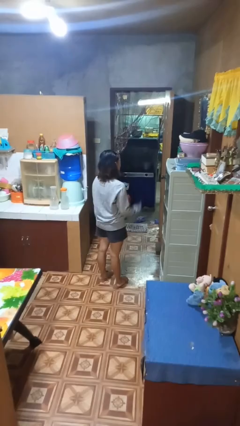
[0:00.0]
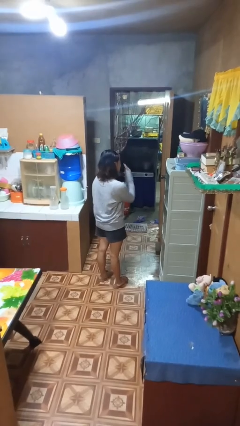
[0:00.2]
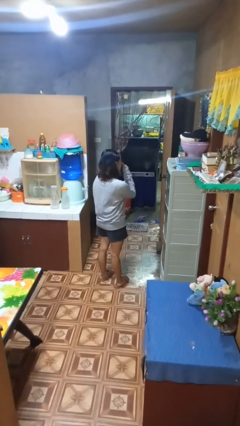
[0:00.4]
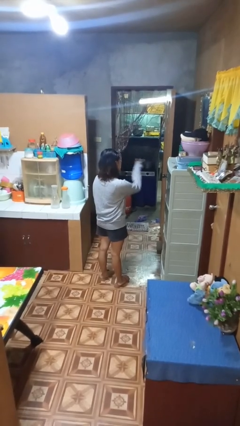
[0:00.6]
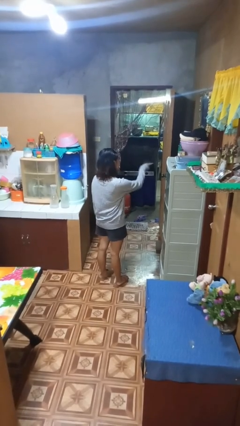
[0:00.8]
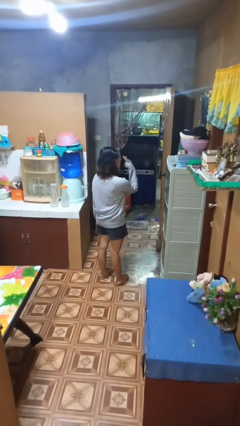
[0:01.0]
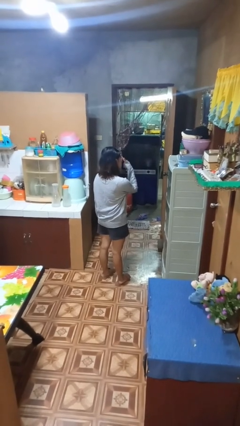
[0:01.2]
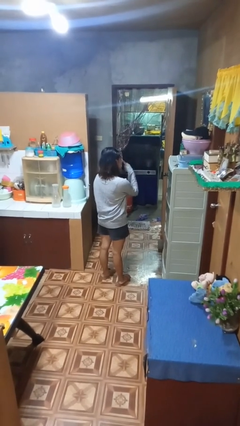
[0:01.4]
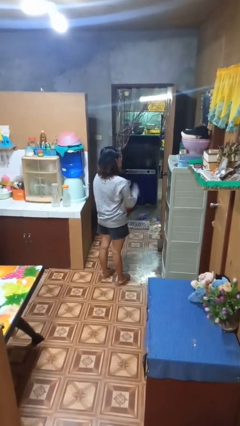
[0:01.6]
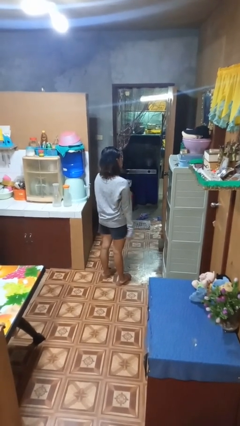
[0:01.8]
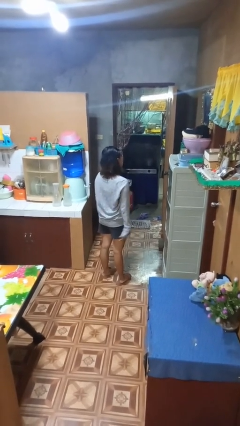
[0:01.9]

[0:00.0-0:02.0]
person gestures watch closely

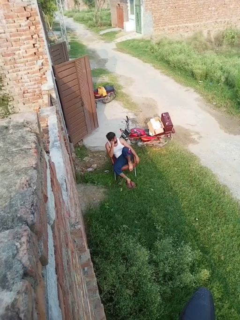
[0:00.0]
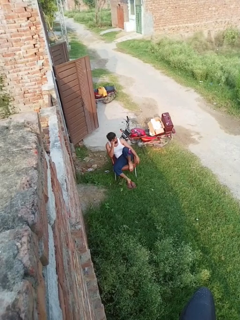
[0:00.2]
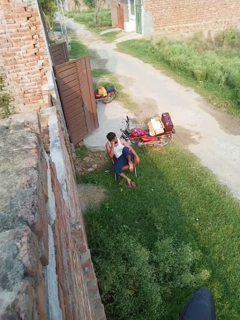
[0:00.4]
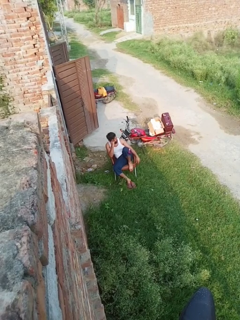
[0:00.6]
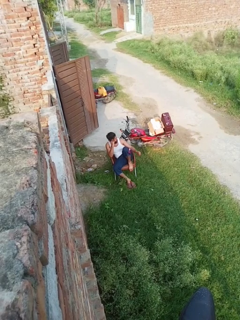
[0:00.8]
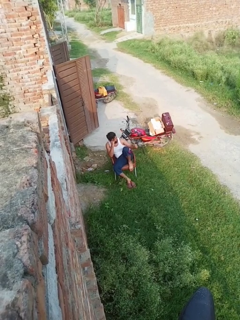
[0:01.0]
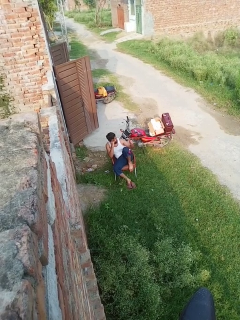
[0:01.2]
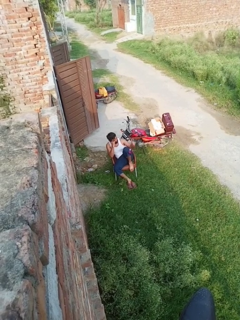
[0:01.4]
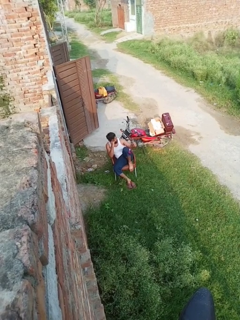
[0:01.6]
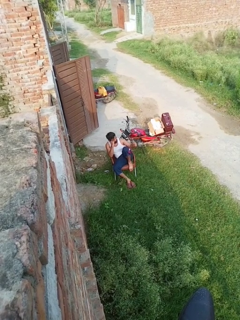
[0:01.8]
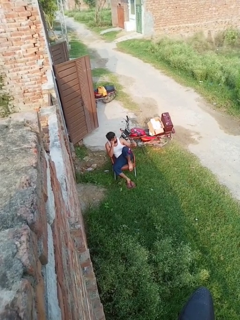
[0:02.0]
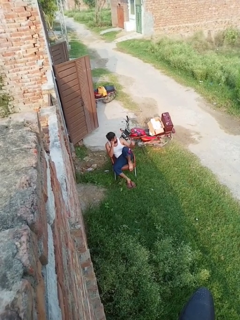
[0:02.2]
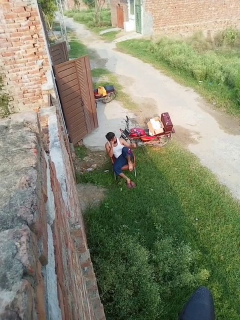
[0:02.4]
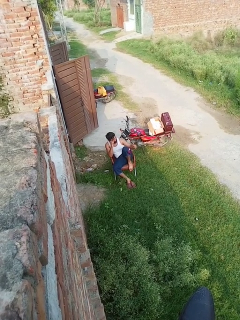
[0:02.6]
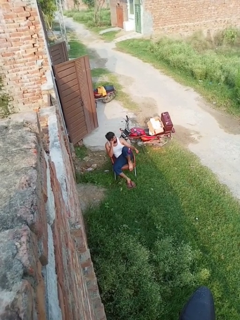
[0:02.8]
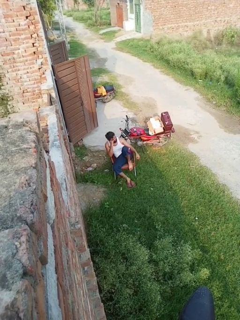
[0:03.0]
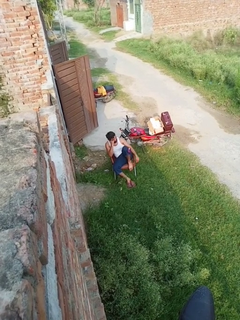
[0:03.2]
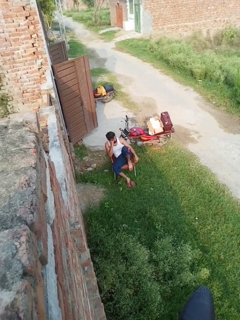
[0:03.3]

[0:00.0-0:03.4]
person gestures thumbs up

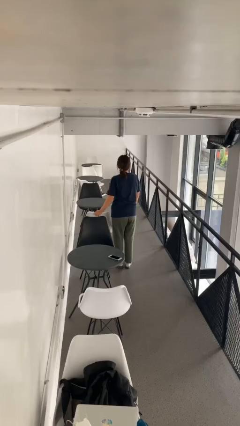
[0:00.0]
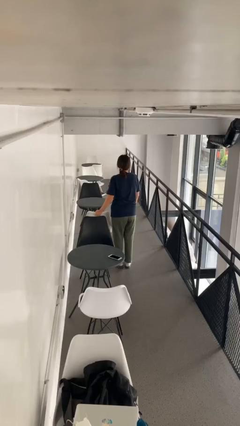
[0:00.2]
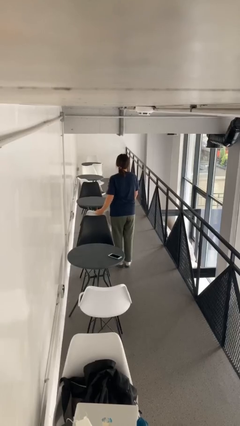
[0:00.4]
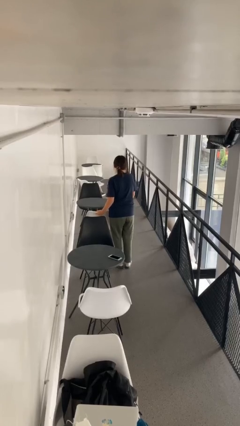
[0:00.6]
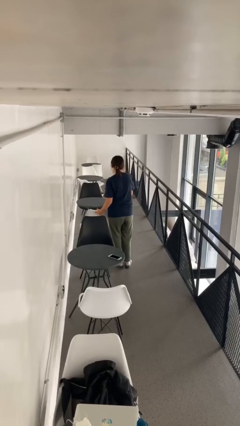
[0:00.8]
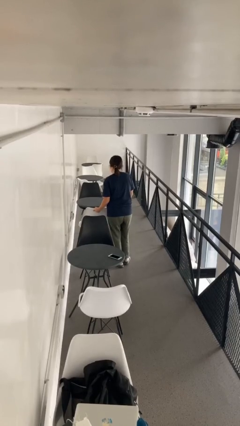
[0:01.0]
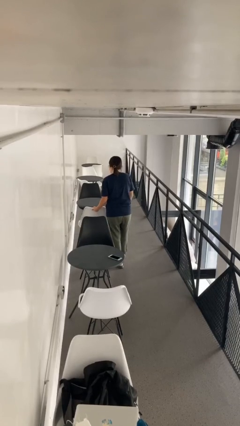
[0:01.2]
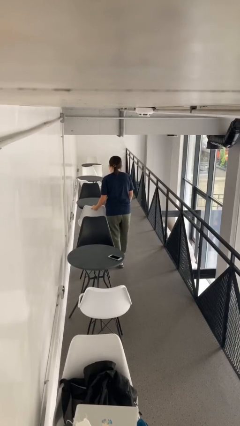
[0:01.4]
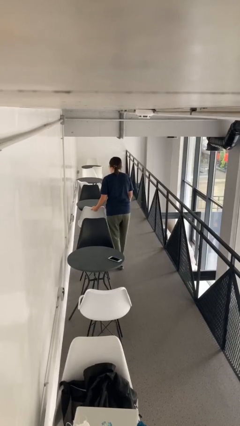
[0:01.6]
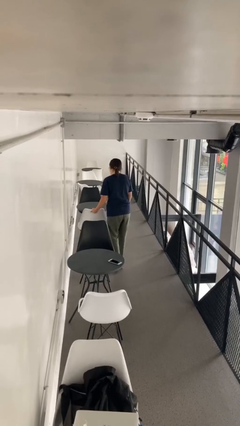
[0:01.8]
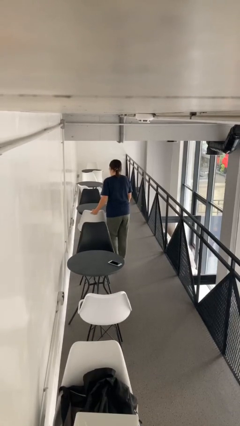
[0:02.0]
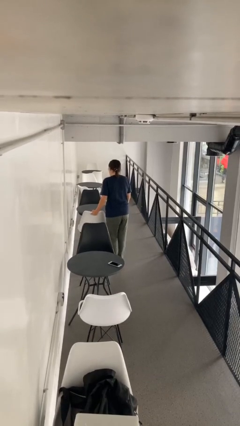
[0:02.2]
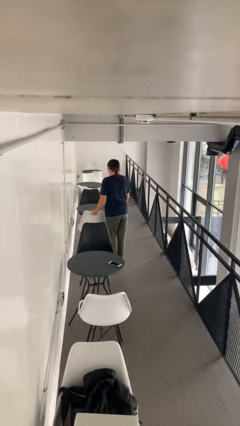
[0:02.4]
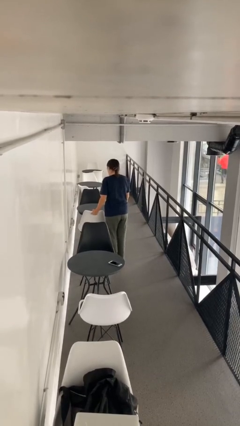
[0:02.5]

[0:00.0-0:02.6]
person pushes in chair
